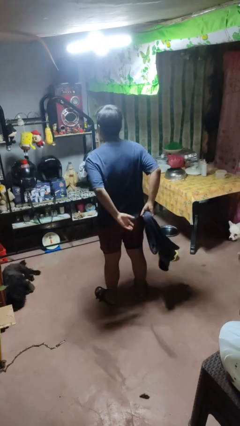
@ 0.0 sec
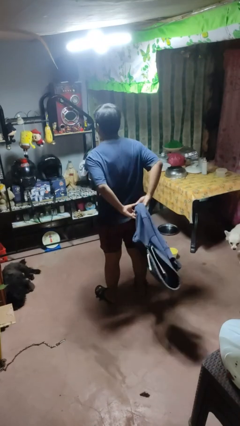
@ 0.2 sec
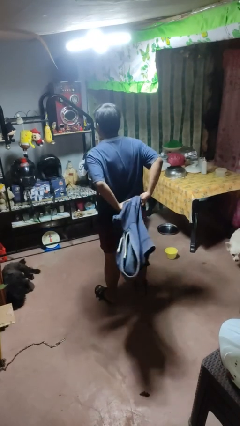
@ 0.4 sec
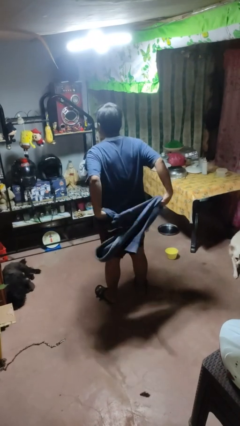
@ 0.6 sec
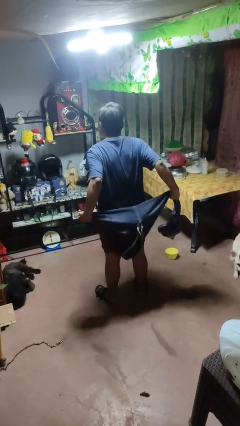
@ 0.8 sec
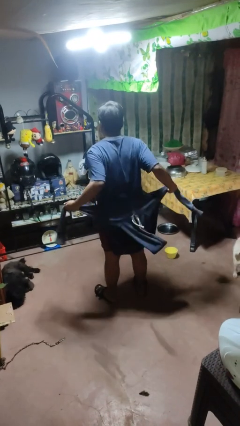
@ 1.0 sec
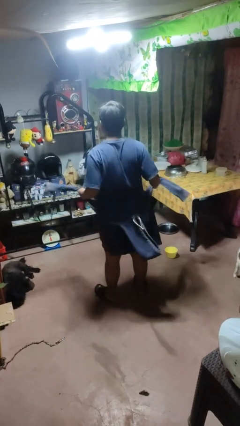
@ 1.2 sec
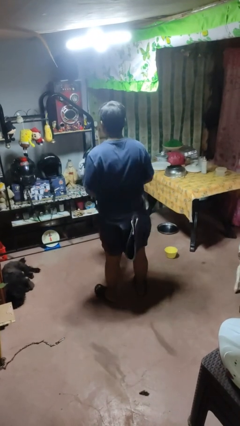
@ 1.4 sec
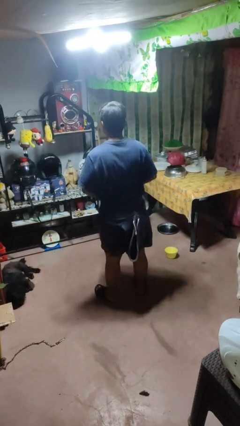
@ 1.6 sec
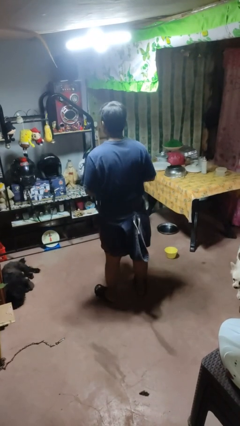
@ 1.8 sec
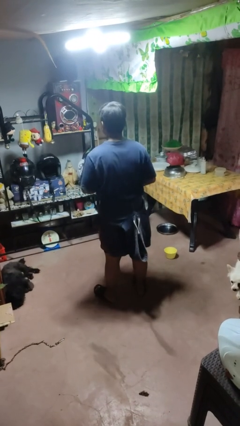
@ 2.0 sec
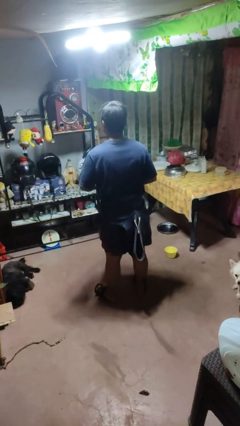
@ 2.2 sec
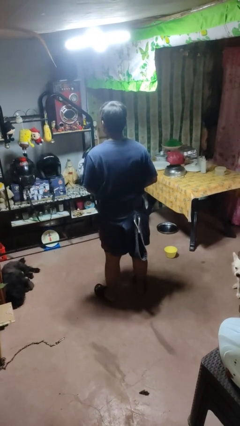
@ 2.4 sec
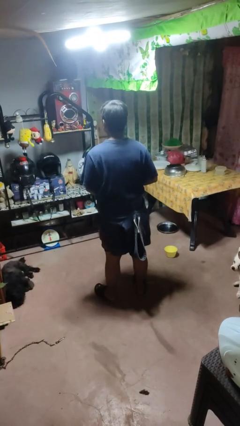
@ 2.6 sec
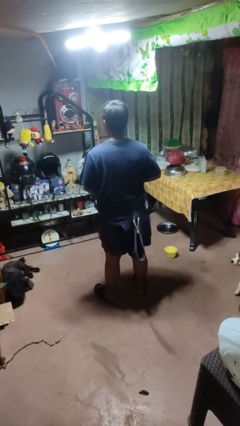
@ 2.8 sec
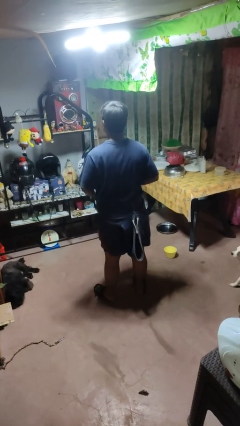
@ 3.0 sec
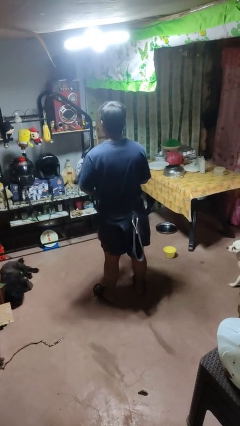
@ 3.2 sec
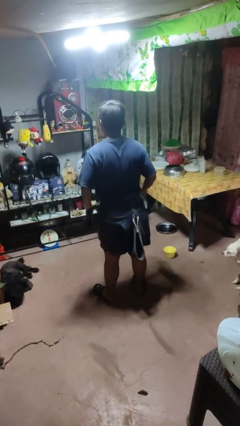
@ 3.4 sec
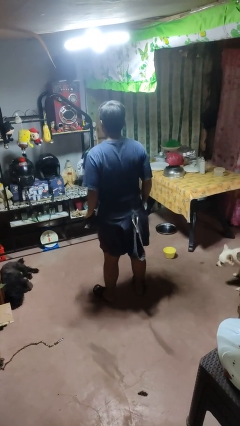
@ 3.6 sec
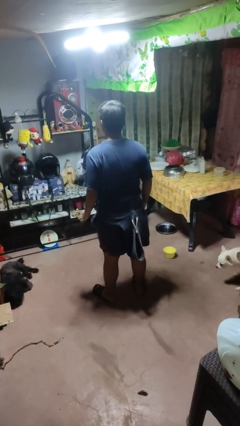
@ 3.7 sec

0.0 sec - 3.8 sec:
person ties jacket around waist

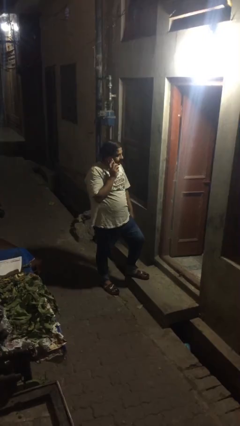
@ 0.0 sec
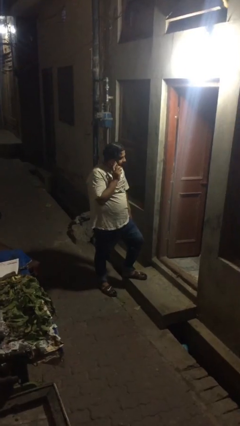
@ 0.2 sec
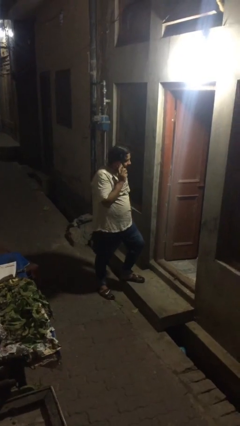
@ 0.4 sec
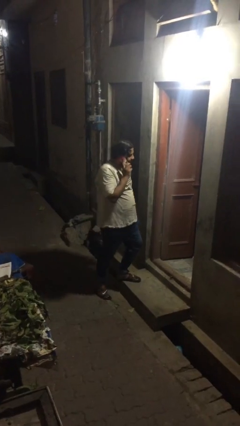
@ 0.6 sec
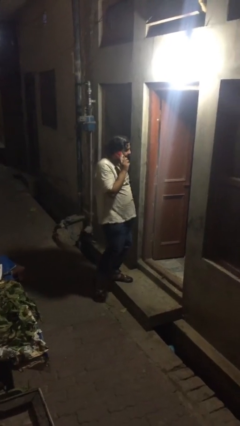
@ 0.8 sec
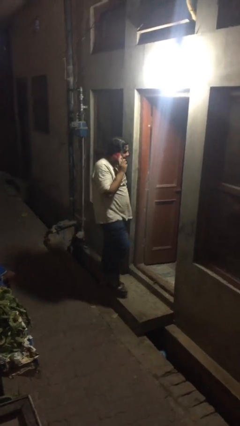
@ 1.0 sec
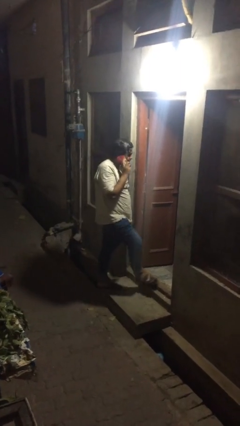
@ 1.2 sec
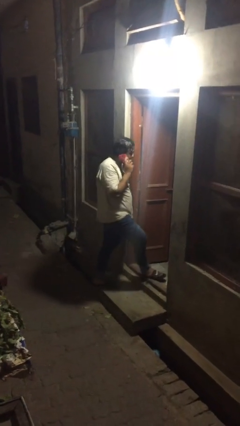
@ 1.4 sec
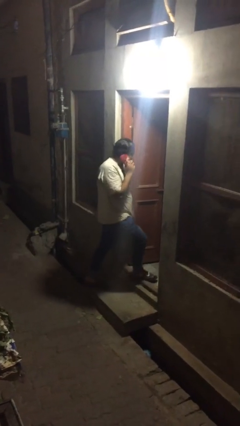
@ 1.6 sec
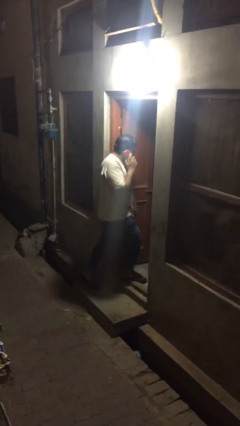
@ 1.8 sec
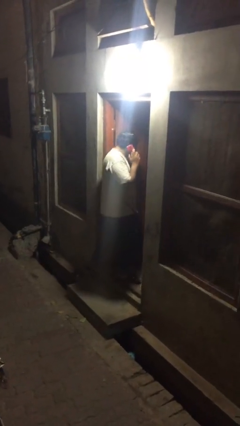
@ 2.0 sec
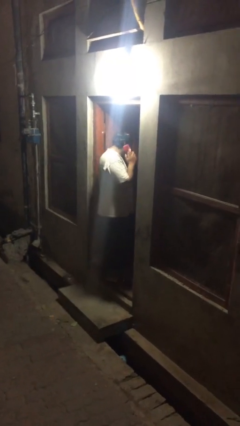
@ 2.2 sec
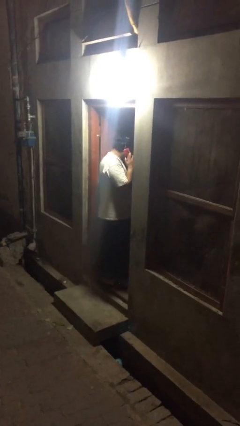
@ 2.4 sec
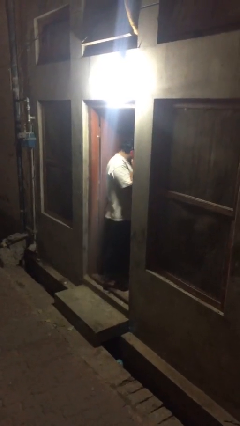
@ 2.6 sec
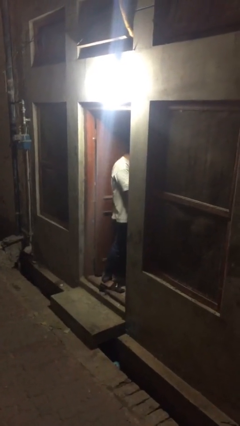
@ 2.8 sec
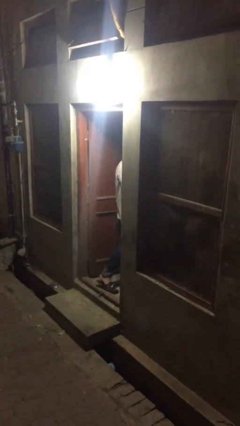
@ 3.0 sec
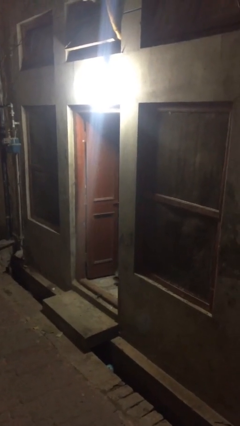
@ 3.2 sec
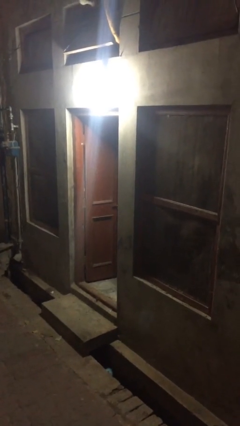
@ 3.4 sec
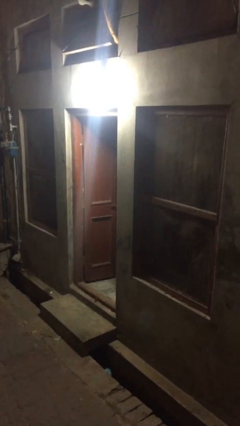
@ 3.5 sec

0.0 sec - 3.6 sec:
person exits scene through structure

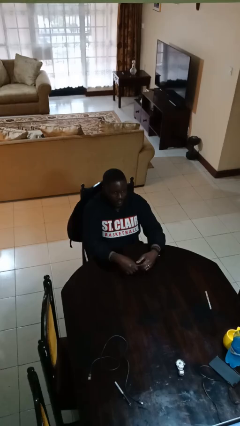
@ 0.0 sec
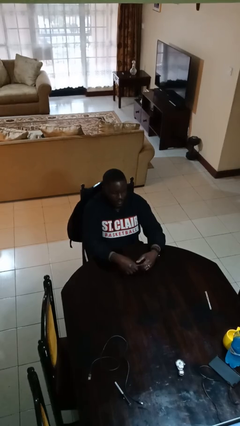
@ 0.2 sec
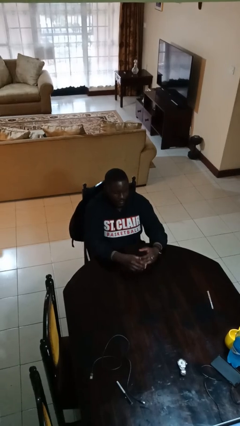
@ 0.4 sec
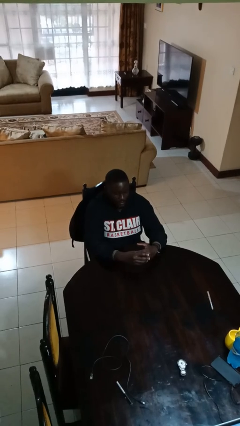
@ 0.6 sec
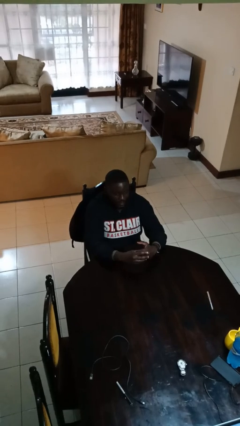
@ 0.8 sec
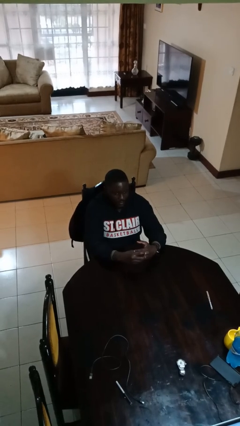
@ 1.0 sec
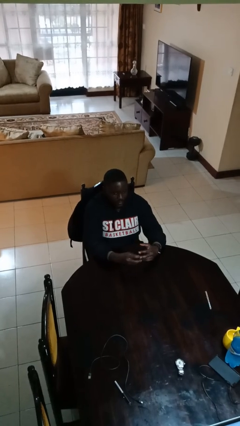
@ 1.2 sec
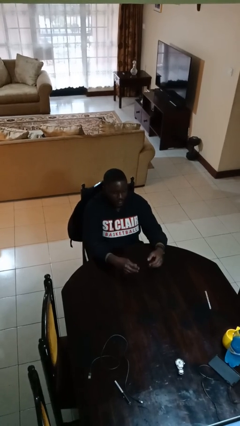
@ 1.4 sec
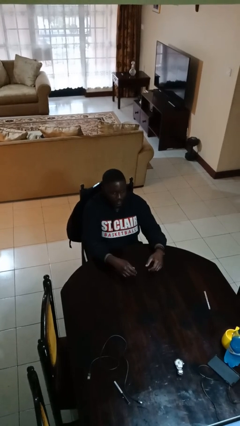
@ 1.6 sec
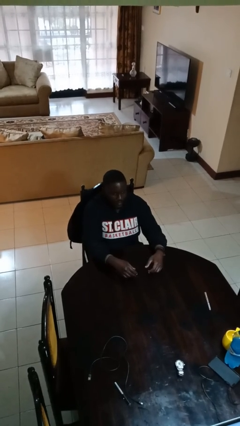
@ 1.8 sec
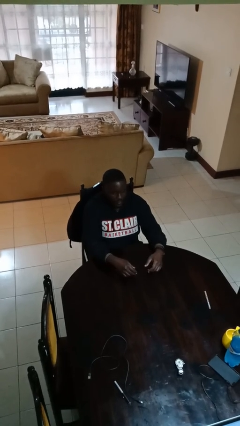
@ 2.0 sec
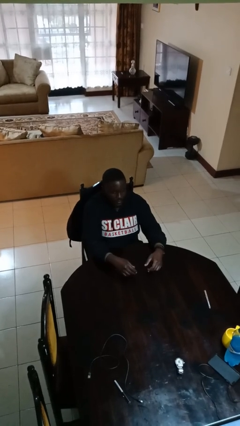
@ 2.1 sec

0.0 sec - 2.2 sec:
person takes off ring

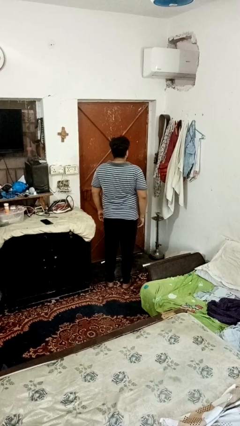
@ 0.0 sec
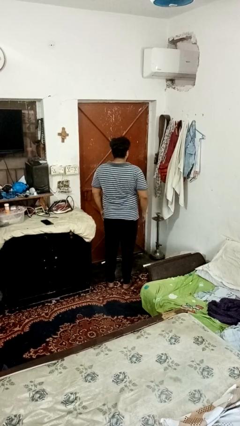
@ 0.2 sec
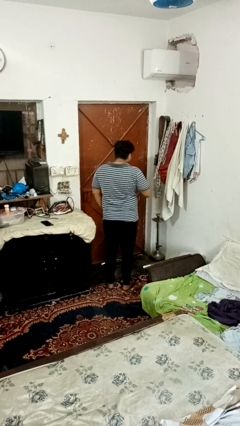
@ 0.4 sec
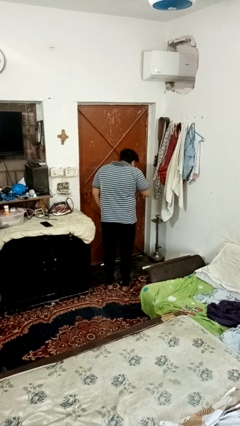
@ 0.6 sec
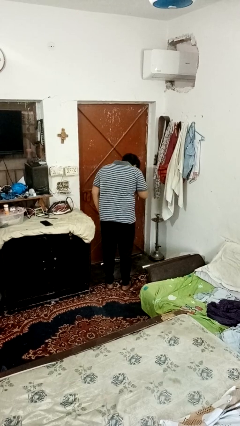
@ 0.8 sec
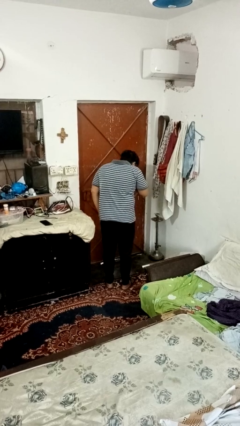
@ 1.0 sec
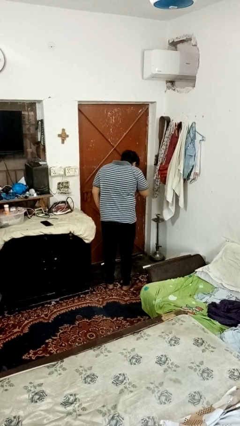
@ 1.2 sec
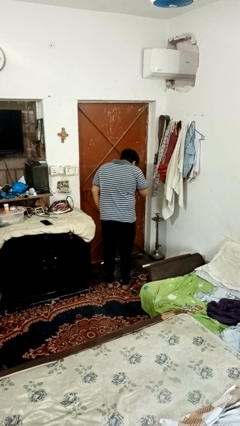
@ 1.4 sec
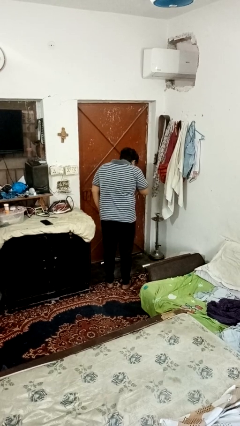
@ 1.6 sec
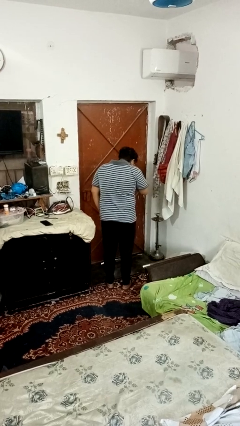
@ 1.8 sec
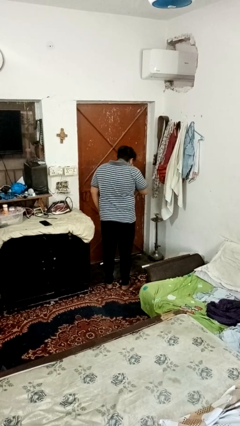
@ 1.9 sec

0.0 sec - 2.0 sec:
person sneezes into hand

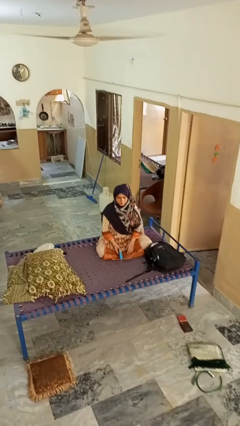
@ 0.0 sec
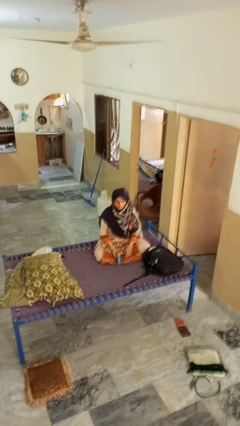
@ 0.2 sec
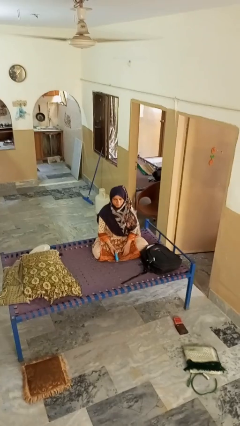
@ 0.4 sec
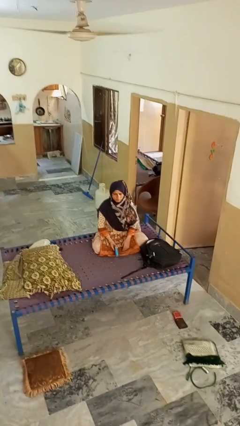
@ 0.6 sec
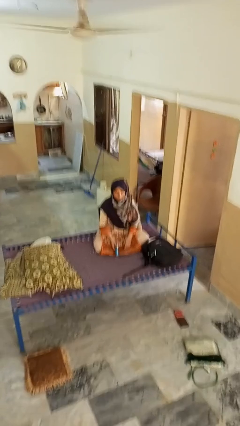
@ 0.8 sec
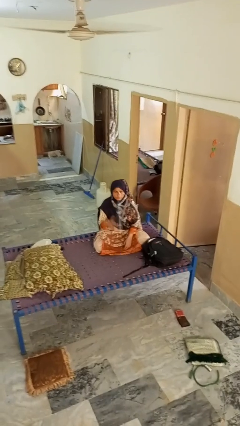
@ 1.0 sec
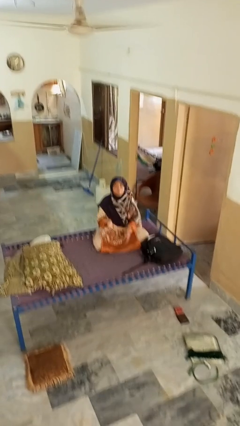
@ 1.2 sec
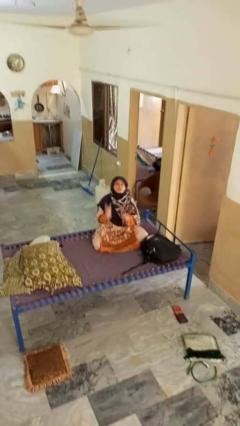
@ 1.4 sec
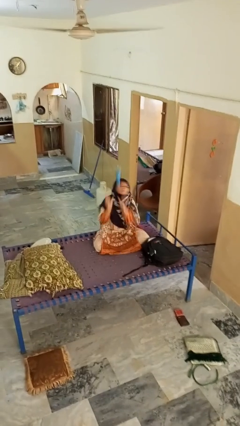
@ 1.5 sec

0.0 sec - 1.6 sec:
person drops object

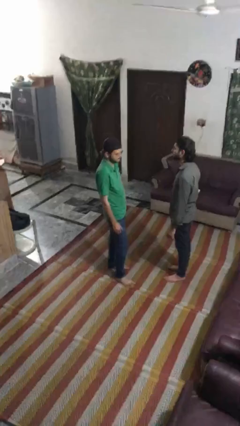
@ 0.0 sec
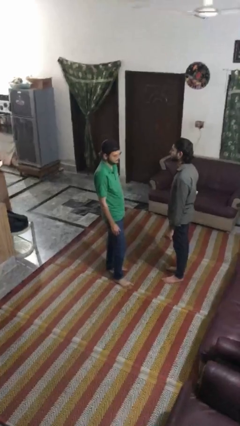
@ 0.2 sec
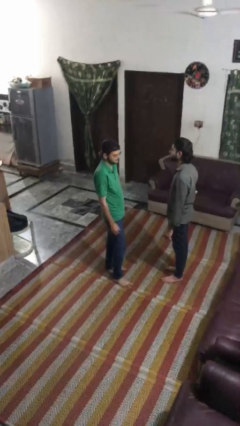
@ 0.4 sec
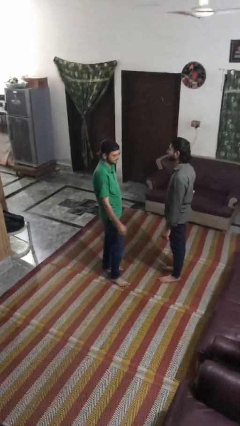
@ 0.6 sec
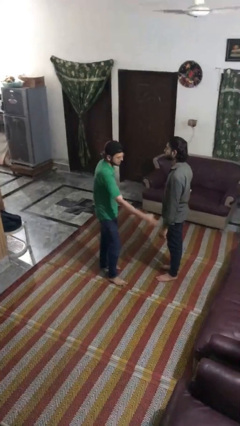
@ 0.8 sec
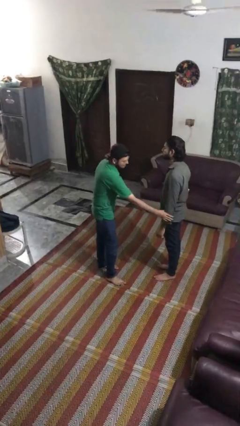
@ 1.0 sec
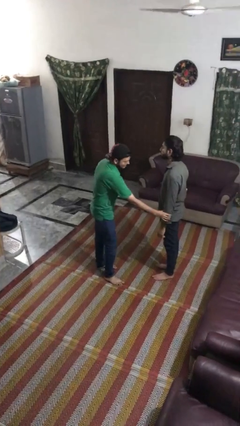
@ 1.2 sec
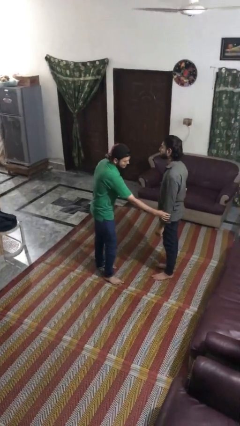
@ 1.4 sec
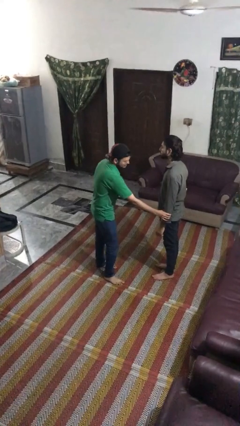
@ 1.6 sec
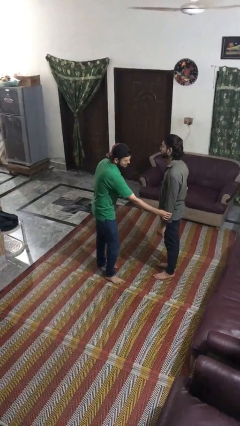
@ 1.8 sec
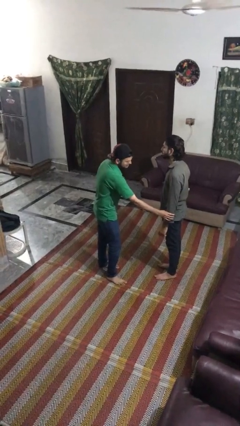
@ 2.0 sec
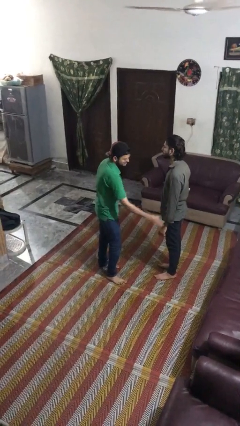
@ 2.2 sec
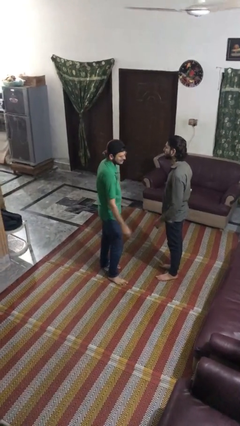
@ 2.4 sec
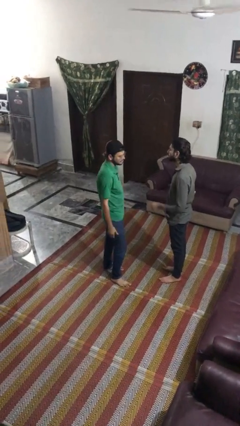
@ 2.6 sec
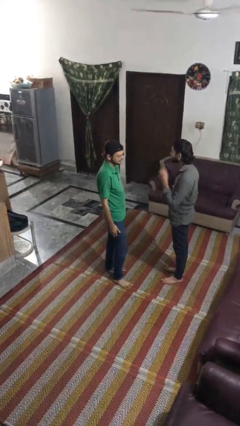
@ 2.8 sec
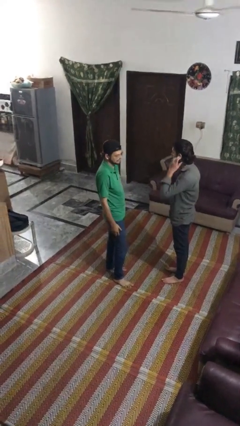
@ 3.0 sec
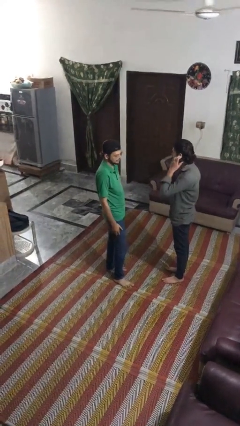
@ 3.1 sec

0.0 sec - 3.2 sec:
person grabs person by forearm

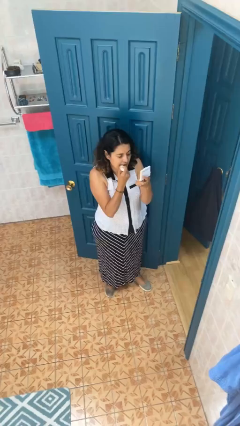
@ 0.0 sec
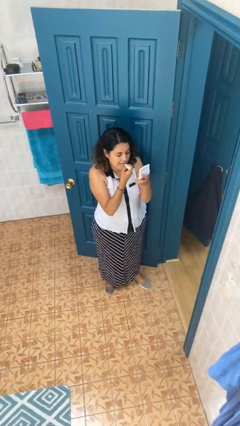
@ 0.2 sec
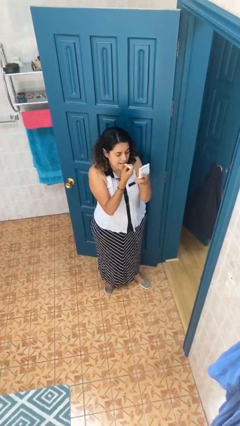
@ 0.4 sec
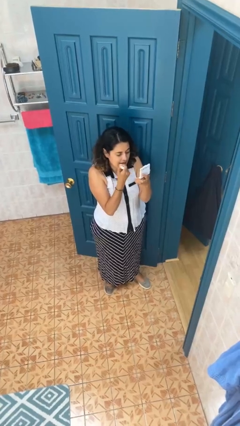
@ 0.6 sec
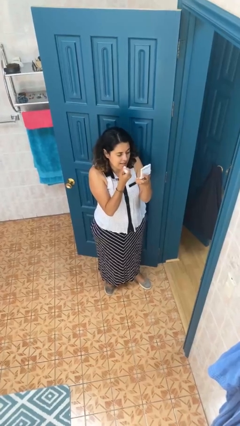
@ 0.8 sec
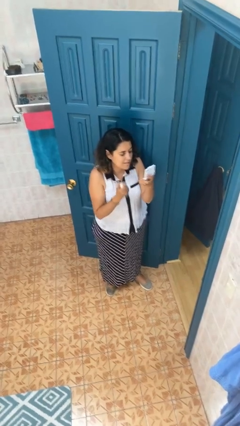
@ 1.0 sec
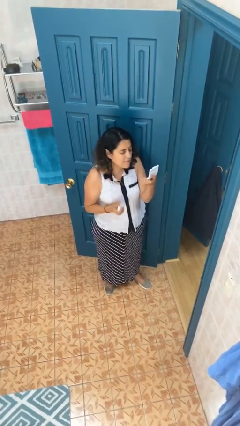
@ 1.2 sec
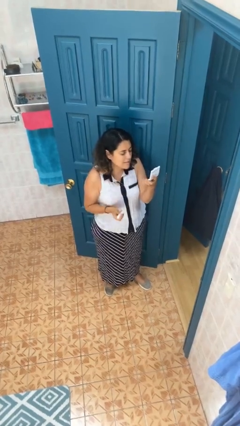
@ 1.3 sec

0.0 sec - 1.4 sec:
person applies lip makeup
